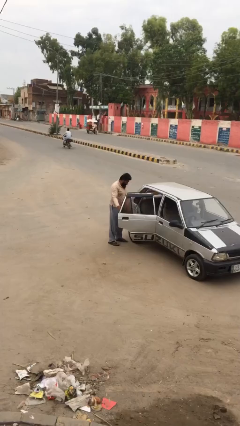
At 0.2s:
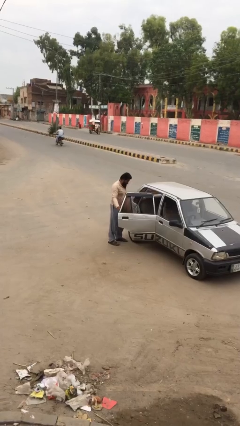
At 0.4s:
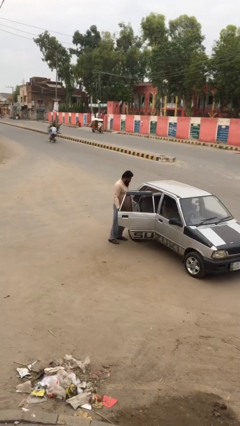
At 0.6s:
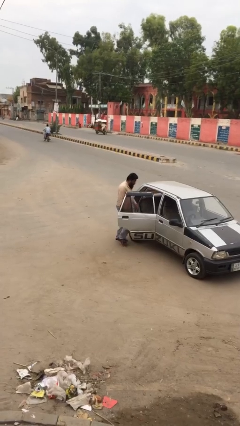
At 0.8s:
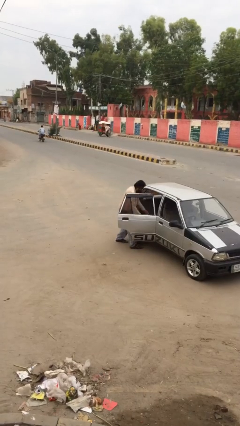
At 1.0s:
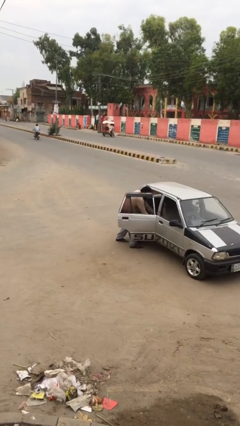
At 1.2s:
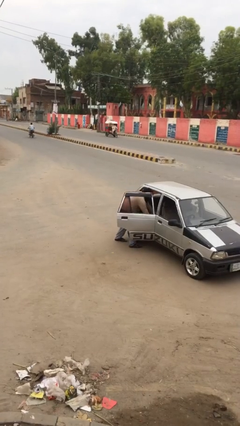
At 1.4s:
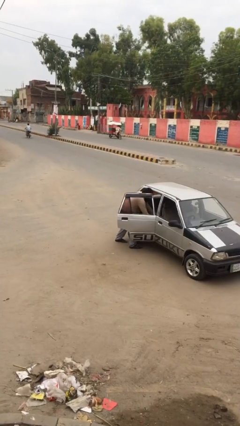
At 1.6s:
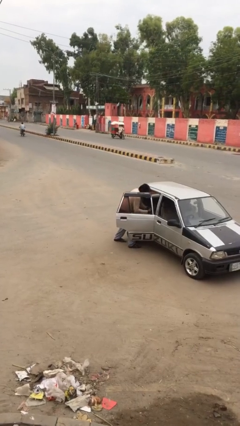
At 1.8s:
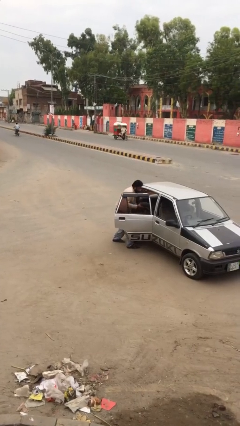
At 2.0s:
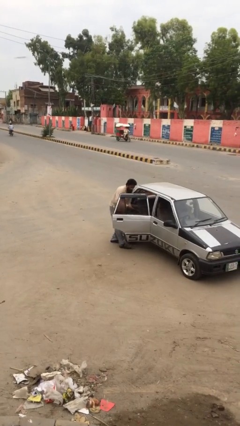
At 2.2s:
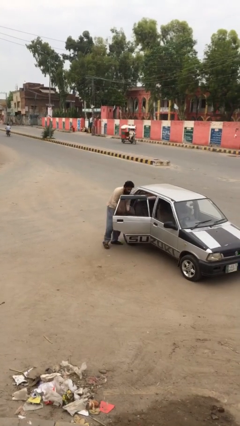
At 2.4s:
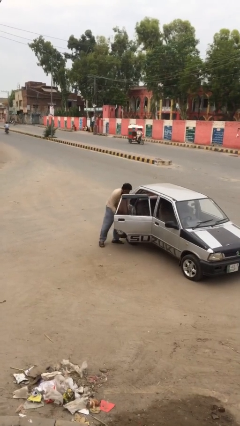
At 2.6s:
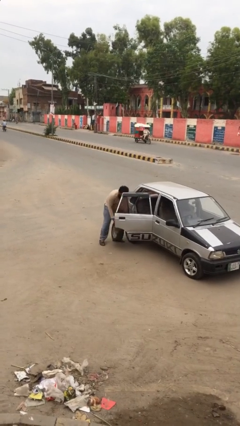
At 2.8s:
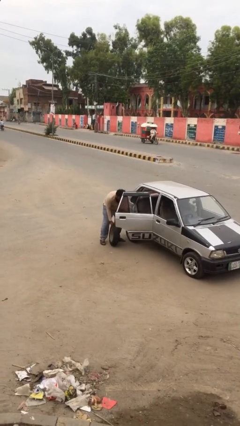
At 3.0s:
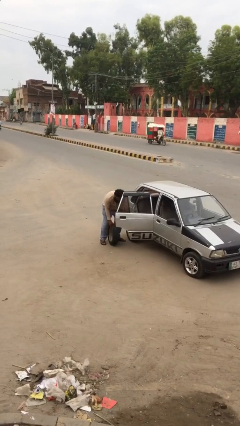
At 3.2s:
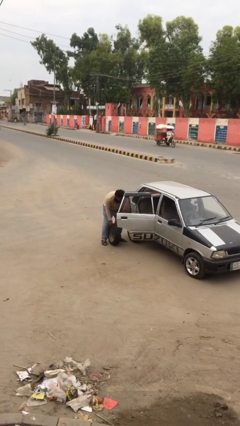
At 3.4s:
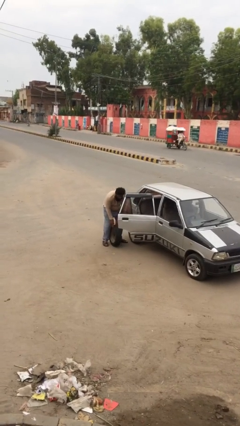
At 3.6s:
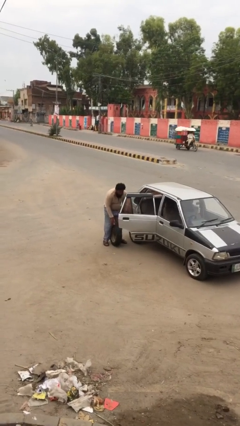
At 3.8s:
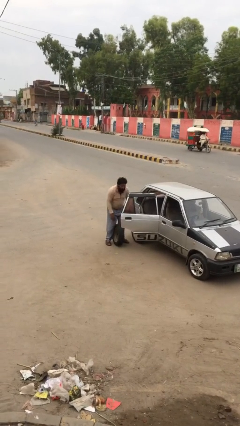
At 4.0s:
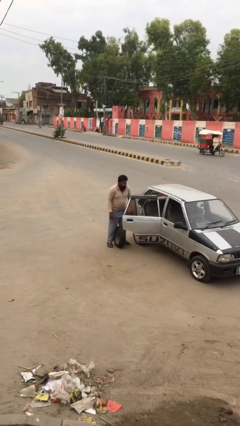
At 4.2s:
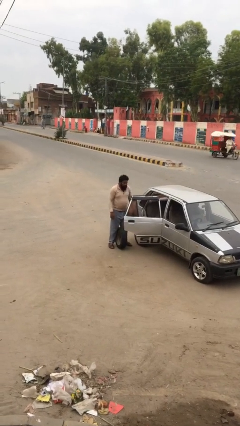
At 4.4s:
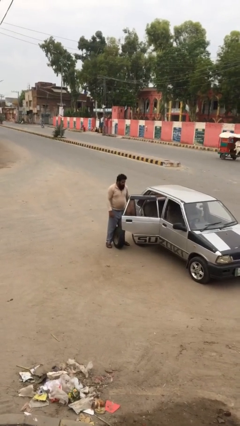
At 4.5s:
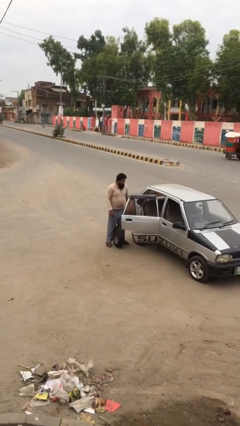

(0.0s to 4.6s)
person unloads car

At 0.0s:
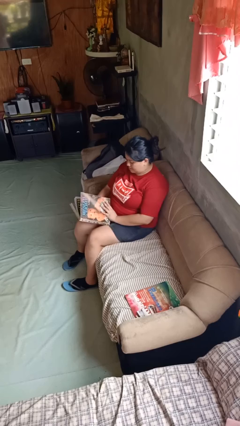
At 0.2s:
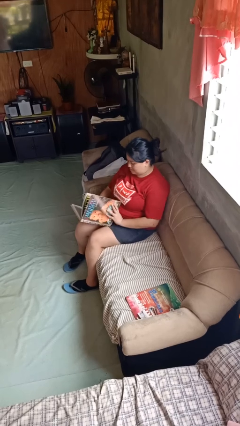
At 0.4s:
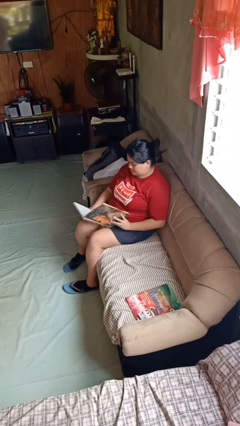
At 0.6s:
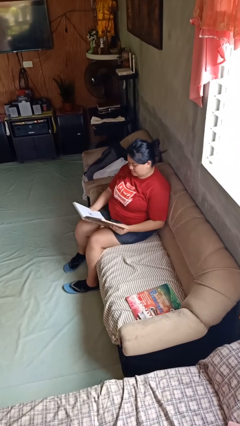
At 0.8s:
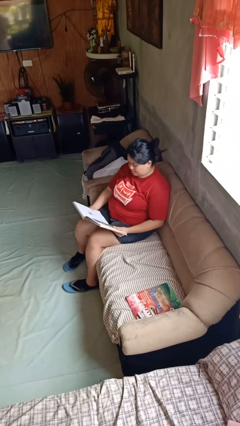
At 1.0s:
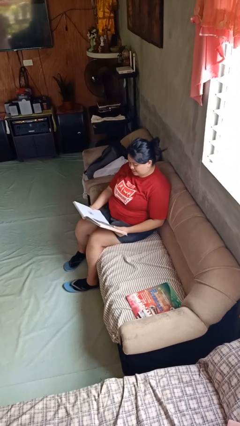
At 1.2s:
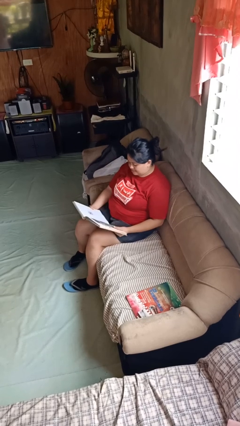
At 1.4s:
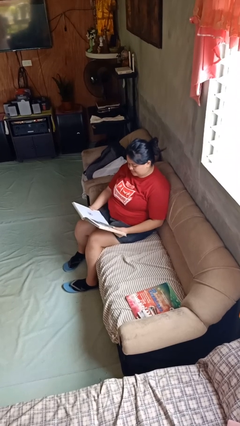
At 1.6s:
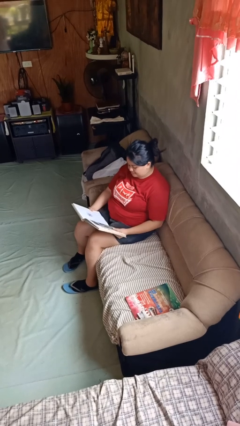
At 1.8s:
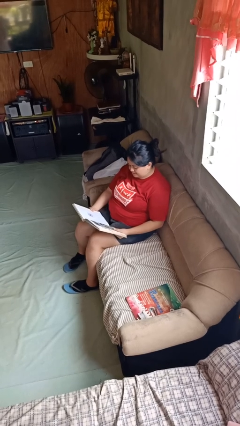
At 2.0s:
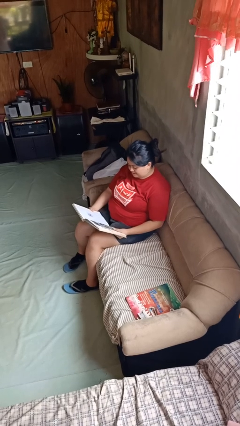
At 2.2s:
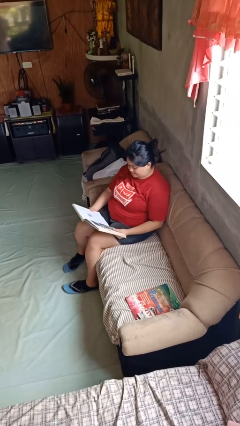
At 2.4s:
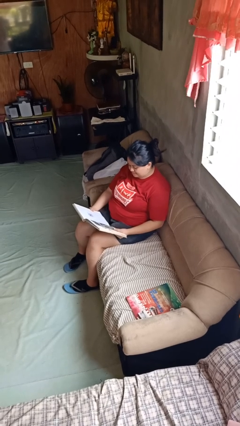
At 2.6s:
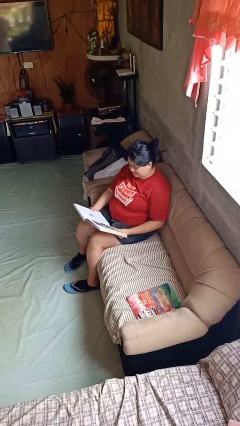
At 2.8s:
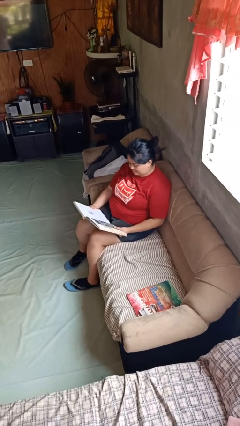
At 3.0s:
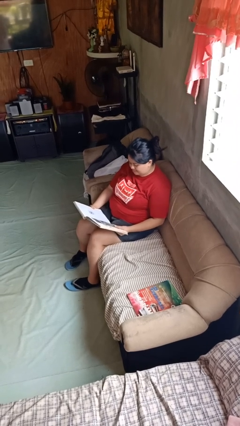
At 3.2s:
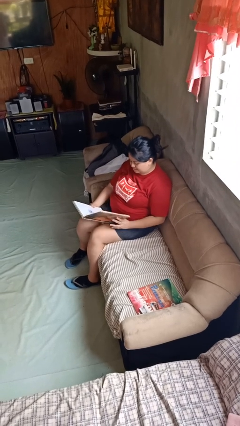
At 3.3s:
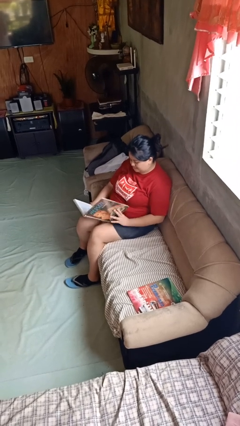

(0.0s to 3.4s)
person reads book

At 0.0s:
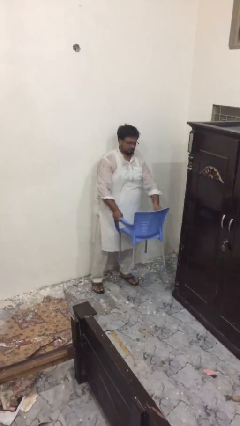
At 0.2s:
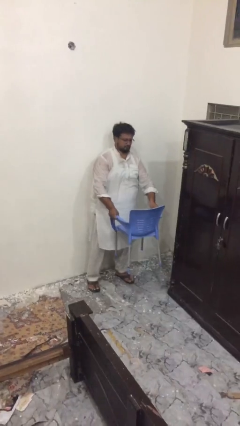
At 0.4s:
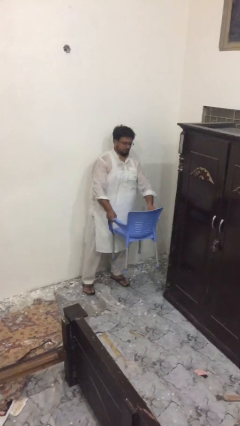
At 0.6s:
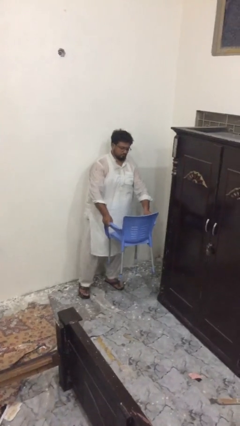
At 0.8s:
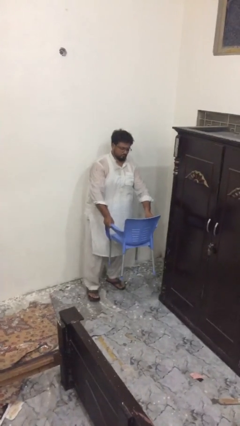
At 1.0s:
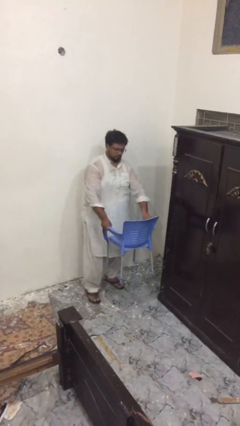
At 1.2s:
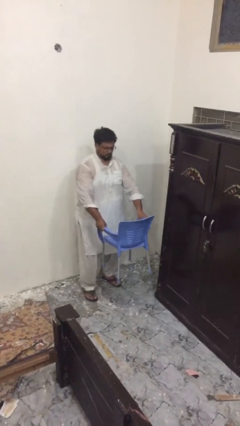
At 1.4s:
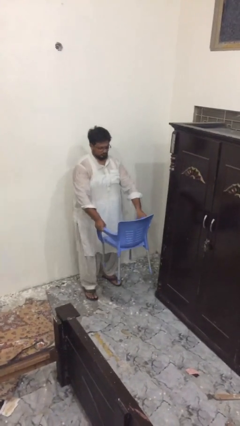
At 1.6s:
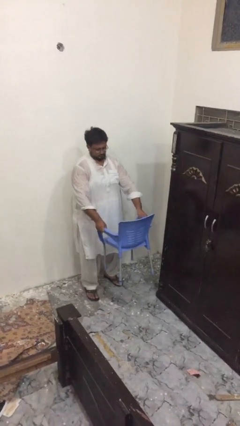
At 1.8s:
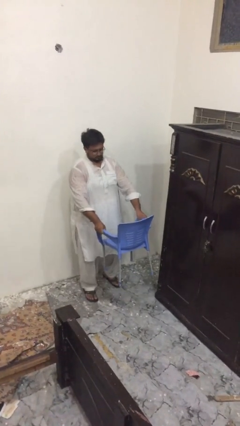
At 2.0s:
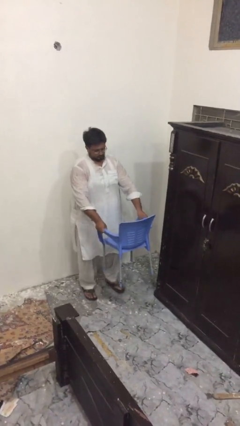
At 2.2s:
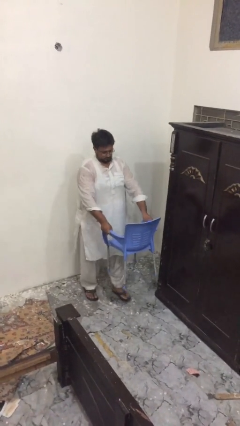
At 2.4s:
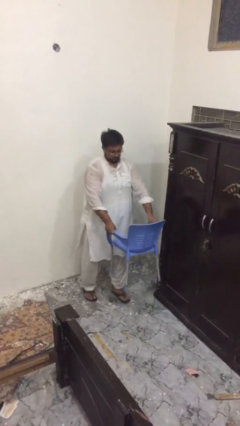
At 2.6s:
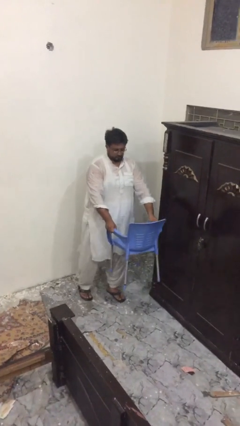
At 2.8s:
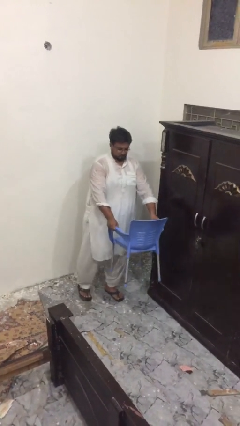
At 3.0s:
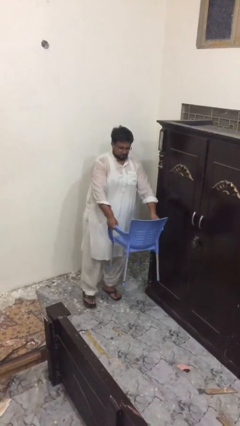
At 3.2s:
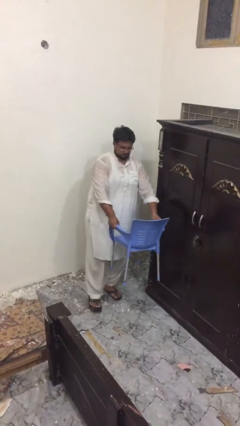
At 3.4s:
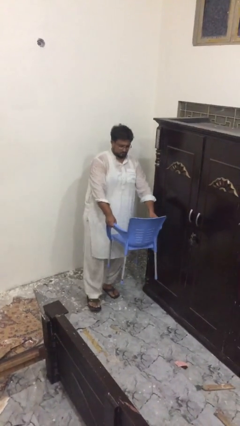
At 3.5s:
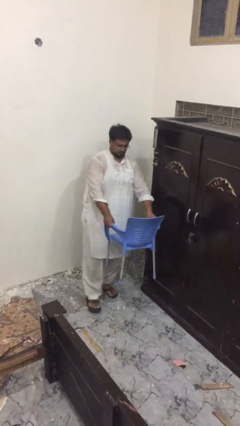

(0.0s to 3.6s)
person carries heavy object

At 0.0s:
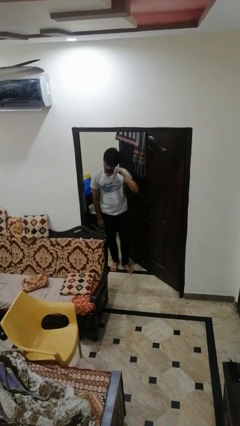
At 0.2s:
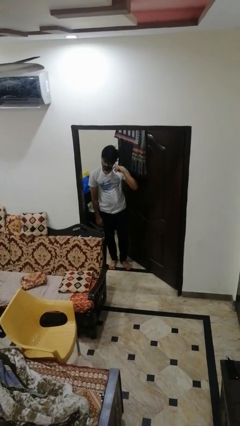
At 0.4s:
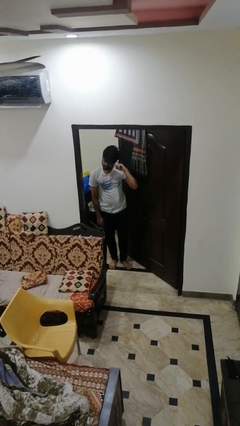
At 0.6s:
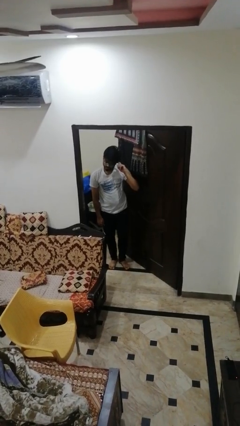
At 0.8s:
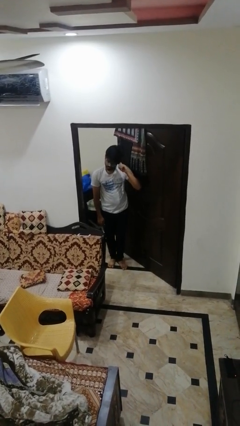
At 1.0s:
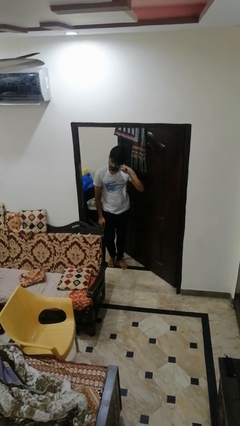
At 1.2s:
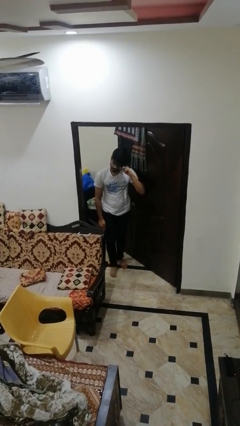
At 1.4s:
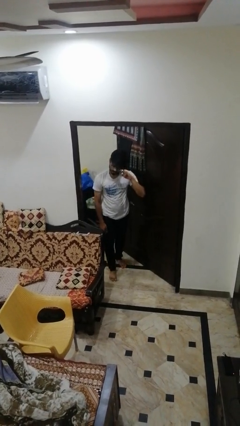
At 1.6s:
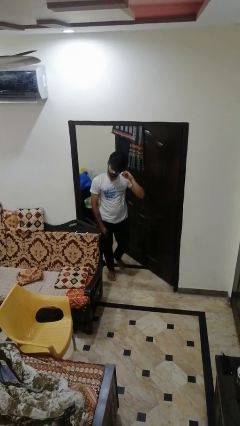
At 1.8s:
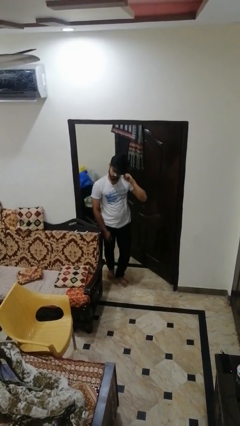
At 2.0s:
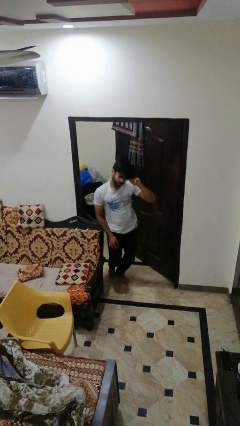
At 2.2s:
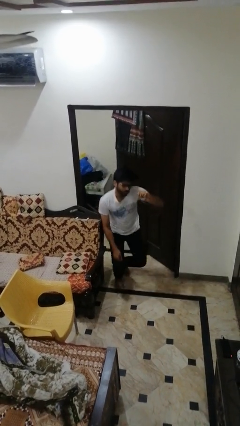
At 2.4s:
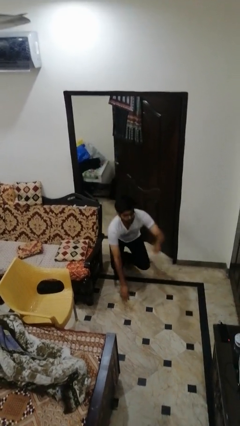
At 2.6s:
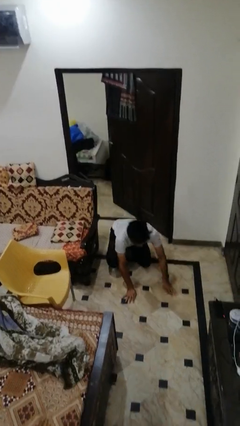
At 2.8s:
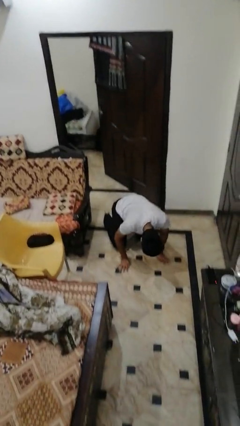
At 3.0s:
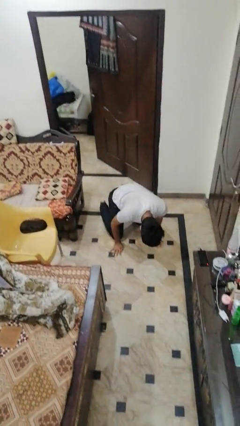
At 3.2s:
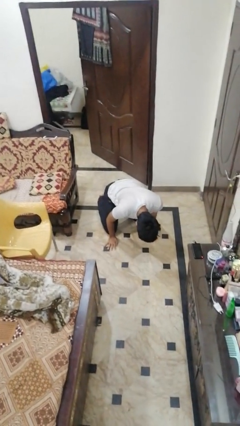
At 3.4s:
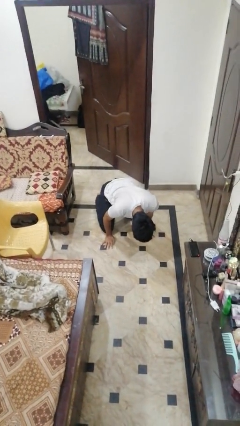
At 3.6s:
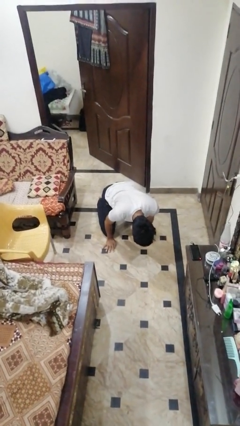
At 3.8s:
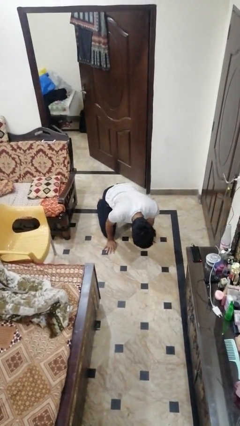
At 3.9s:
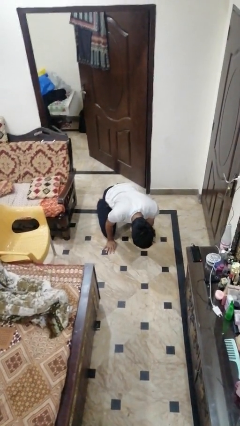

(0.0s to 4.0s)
person trips on object on floor

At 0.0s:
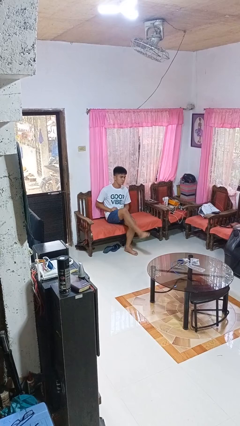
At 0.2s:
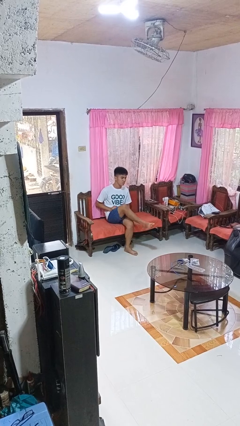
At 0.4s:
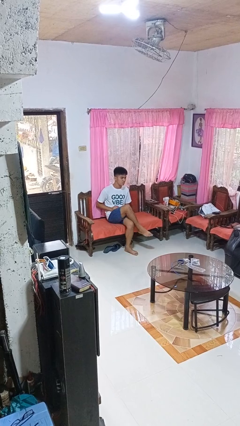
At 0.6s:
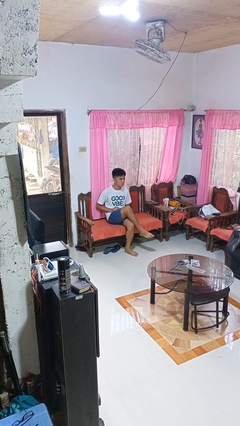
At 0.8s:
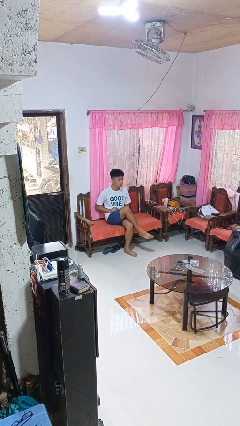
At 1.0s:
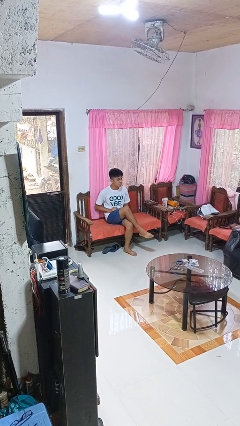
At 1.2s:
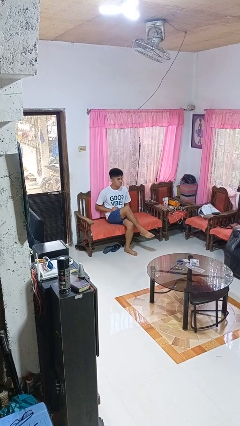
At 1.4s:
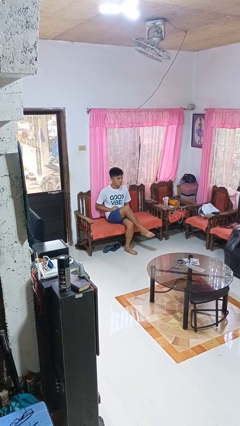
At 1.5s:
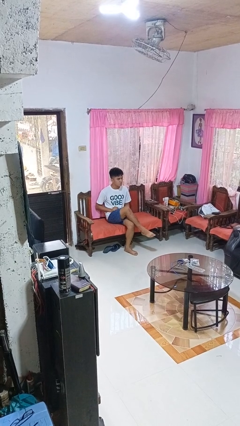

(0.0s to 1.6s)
person crosses legs

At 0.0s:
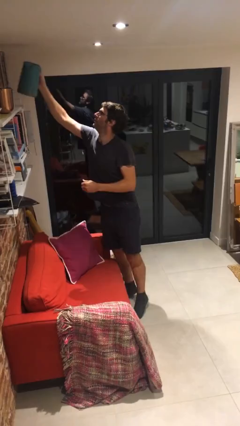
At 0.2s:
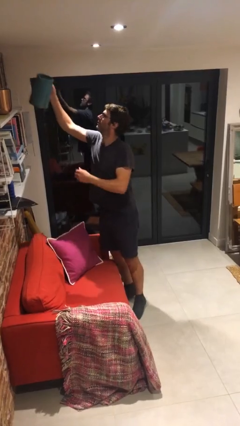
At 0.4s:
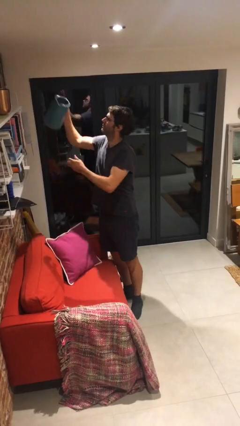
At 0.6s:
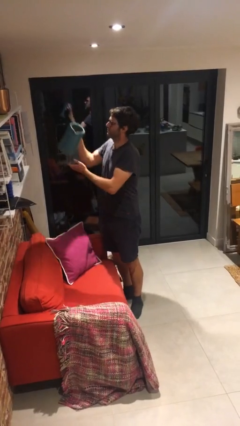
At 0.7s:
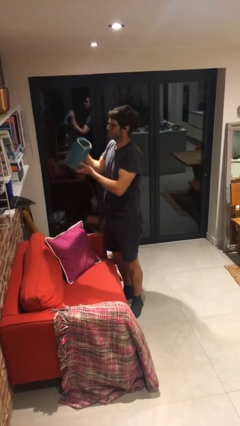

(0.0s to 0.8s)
person picks up object from shelf
